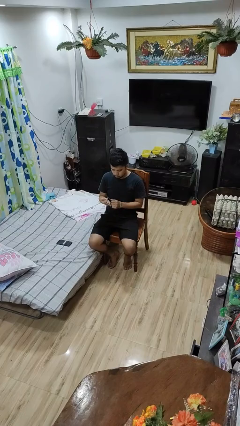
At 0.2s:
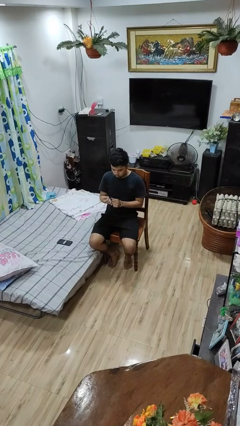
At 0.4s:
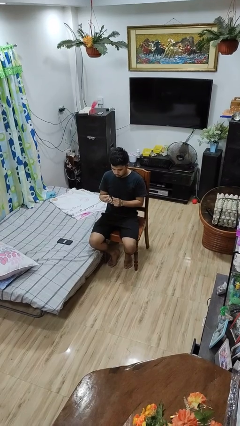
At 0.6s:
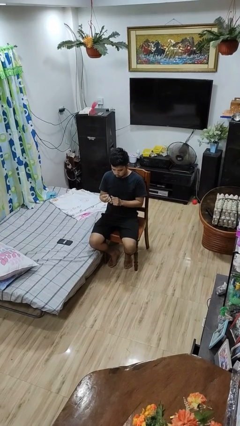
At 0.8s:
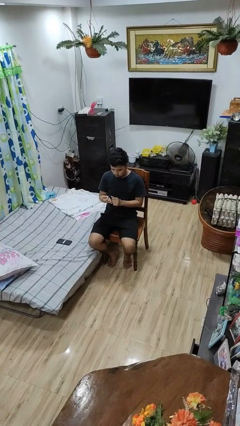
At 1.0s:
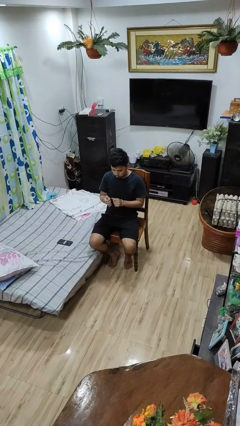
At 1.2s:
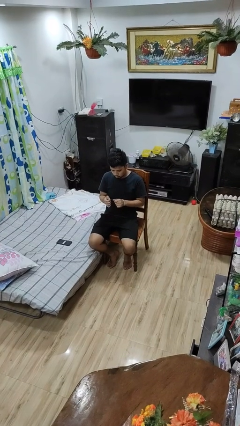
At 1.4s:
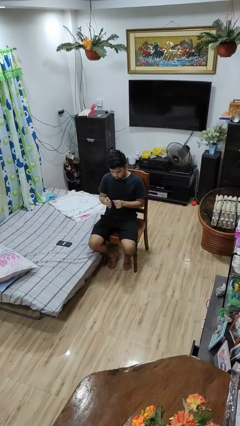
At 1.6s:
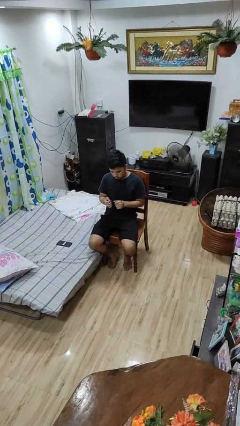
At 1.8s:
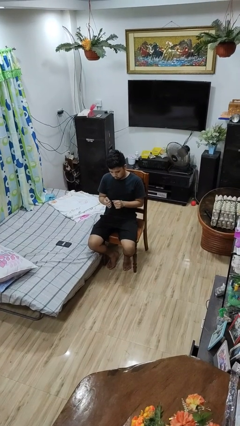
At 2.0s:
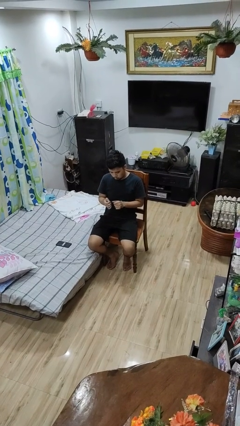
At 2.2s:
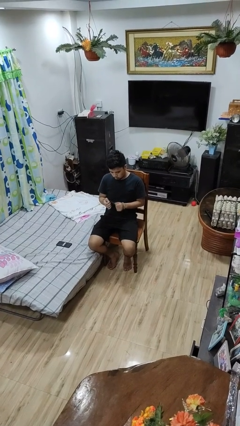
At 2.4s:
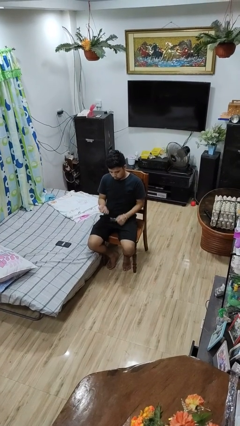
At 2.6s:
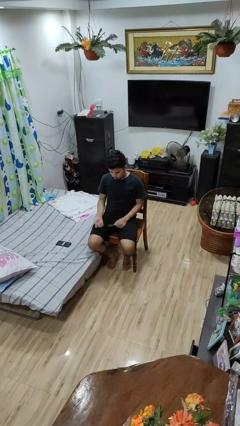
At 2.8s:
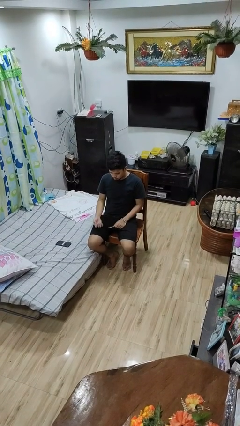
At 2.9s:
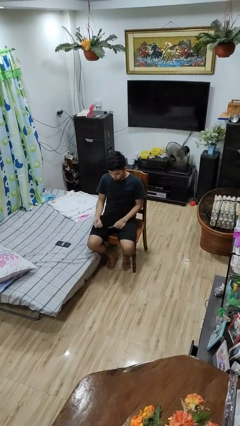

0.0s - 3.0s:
person files fingernails

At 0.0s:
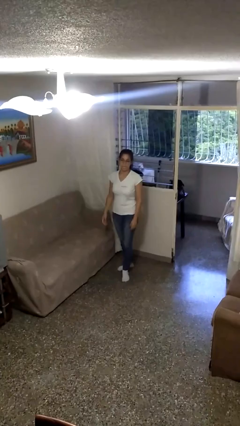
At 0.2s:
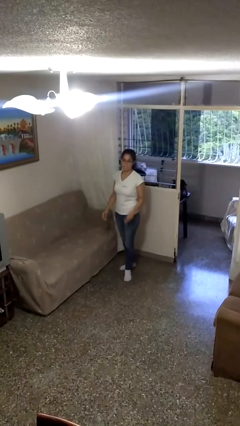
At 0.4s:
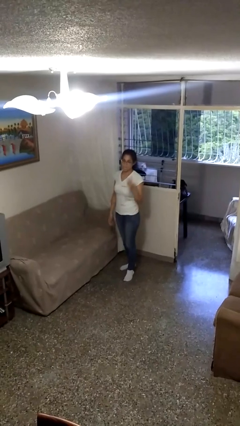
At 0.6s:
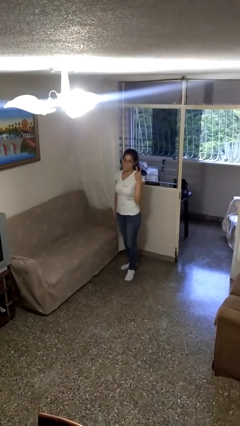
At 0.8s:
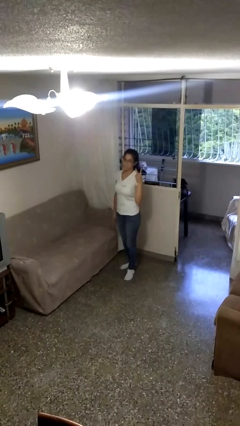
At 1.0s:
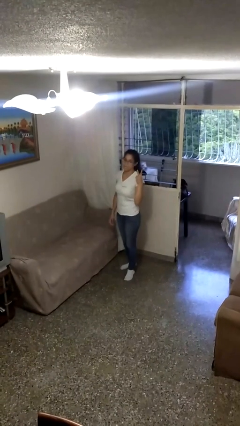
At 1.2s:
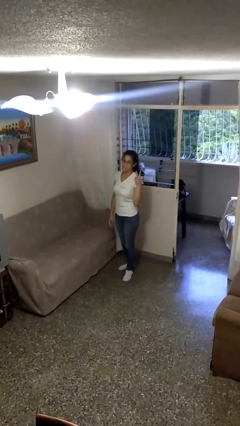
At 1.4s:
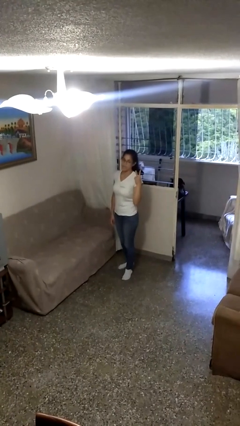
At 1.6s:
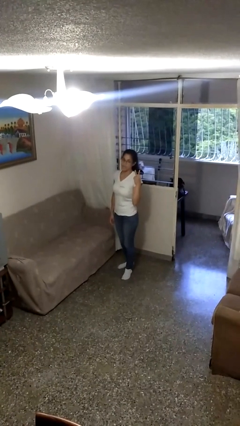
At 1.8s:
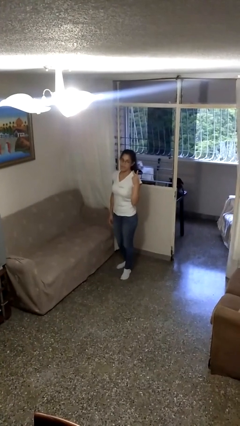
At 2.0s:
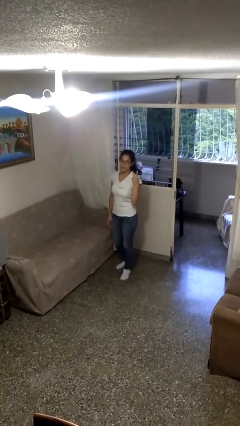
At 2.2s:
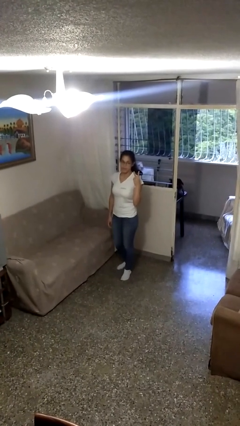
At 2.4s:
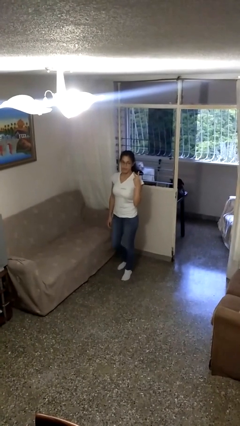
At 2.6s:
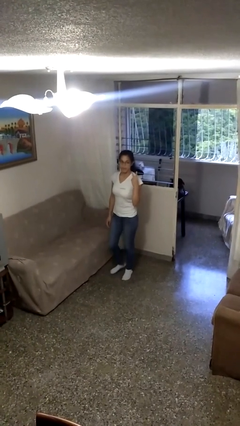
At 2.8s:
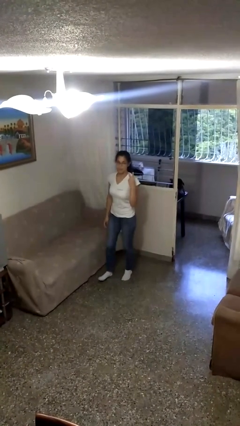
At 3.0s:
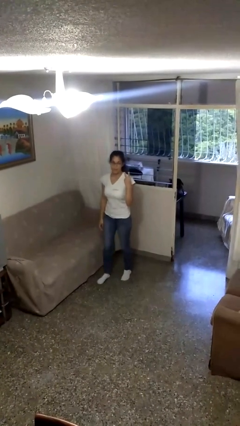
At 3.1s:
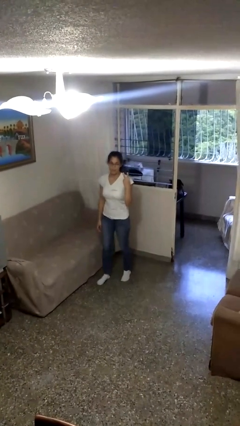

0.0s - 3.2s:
person gestures peace

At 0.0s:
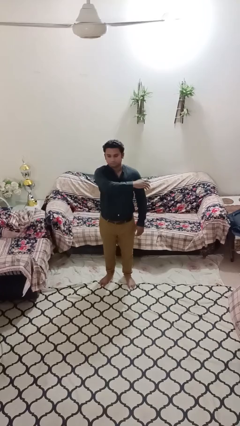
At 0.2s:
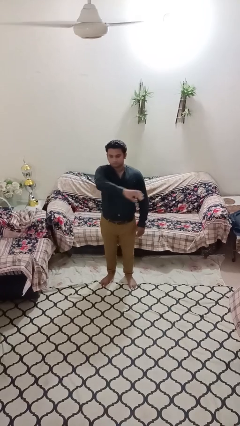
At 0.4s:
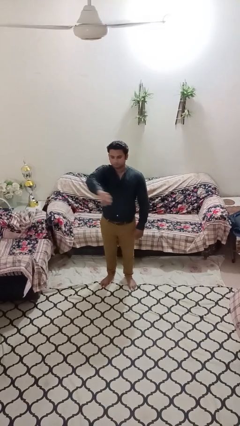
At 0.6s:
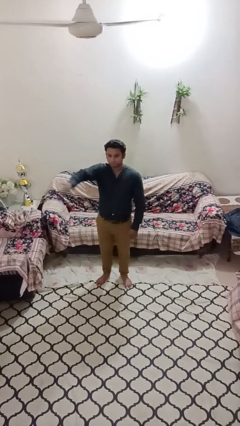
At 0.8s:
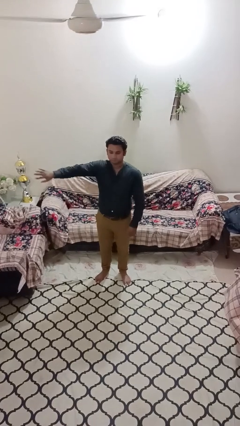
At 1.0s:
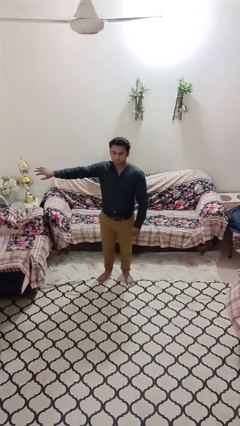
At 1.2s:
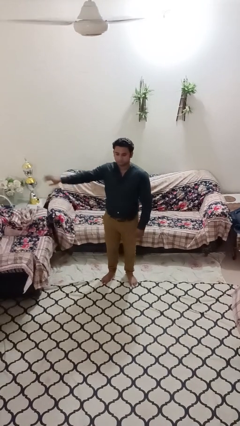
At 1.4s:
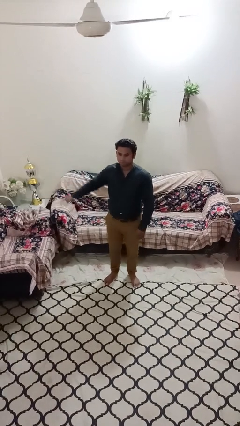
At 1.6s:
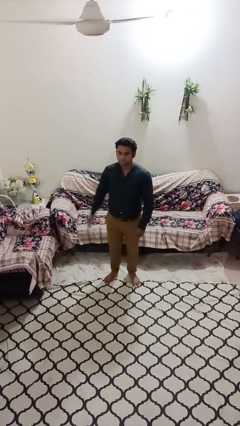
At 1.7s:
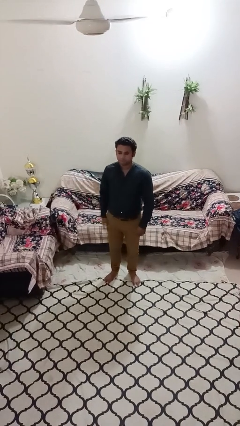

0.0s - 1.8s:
person gestures swipe right

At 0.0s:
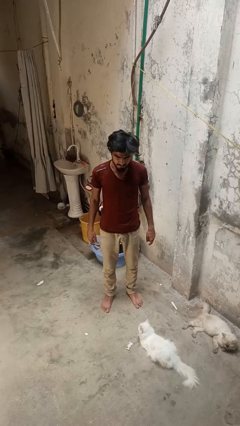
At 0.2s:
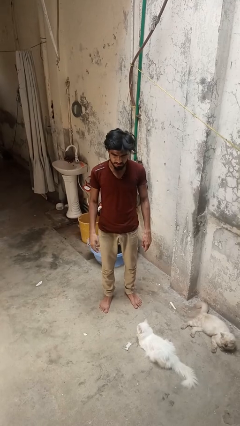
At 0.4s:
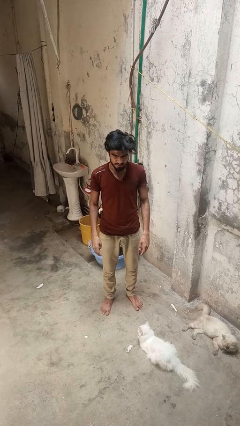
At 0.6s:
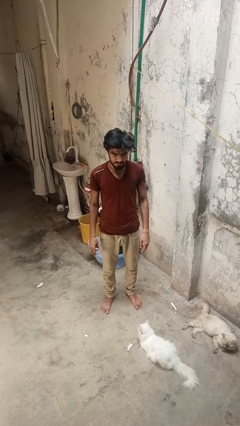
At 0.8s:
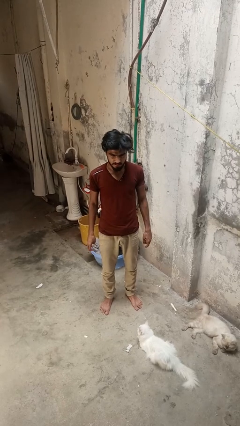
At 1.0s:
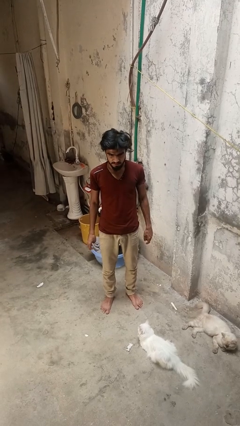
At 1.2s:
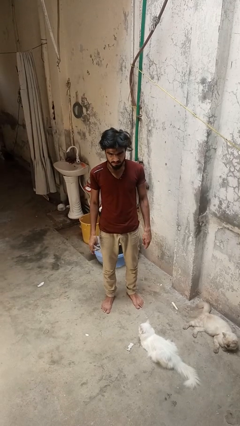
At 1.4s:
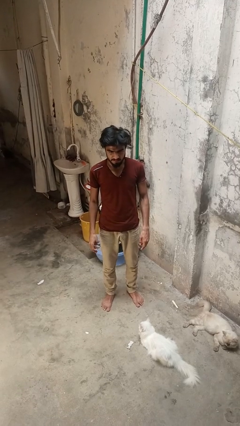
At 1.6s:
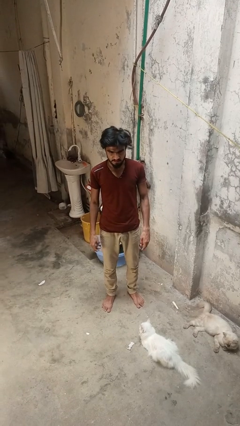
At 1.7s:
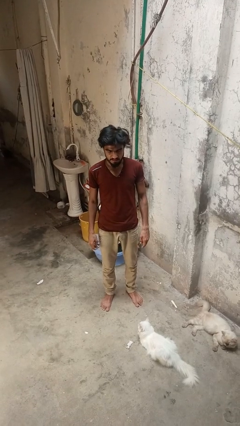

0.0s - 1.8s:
person gestures lower hand

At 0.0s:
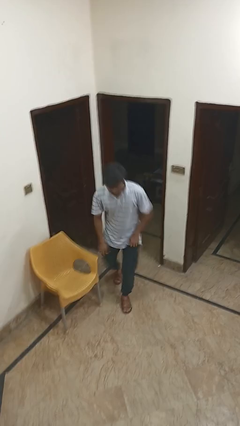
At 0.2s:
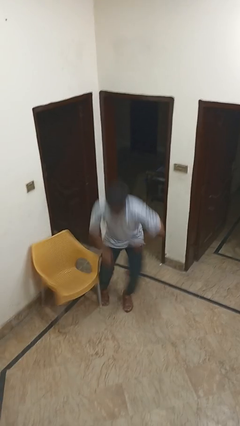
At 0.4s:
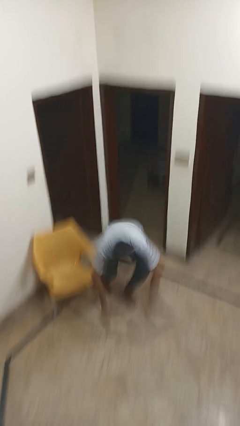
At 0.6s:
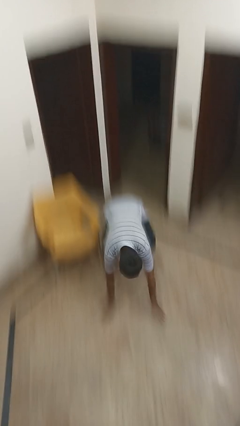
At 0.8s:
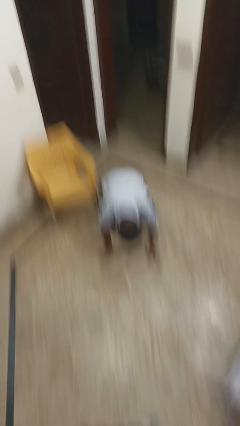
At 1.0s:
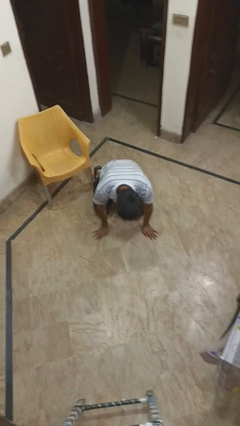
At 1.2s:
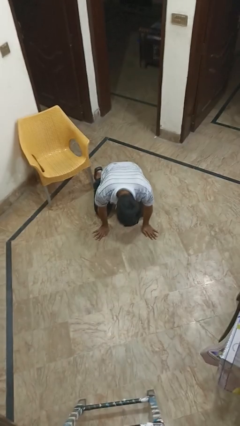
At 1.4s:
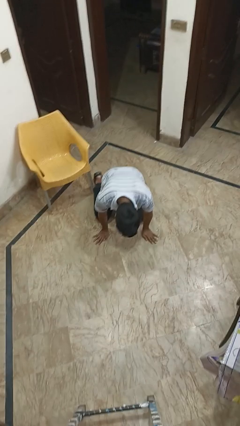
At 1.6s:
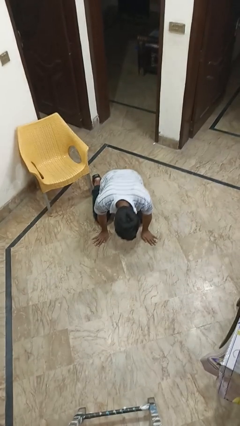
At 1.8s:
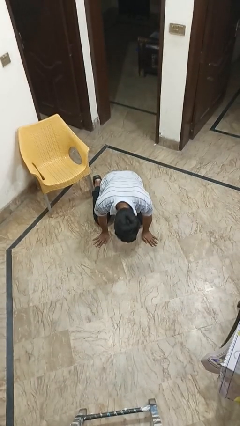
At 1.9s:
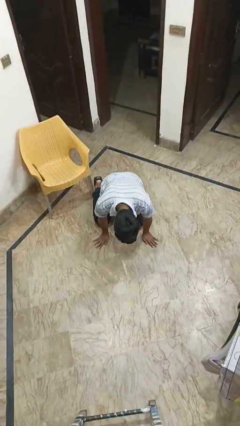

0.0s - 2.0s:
person trips on object on floor

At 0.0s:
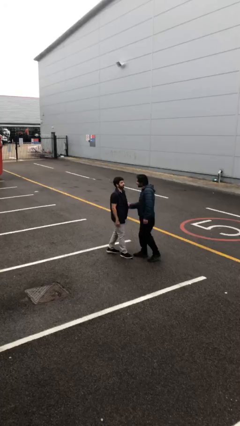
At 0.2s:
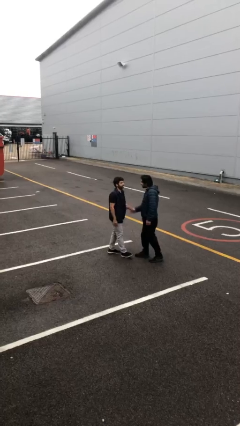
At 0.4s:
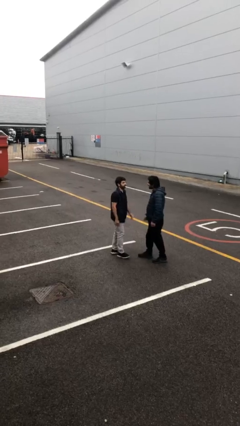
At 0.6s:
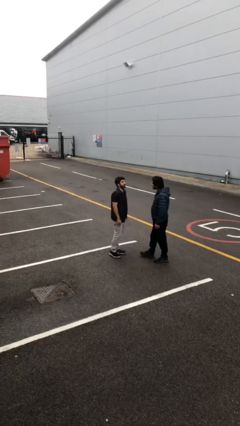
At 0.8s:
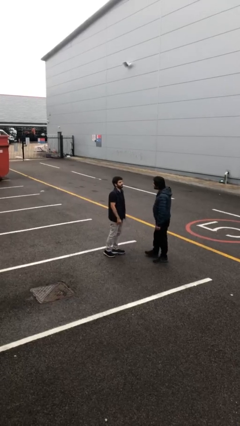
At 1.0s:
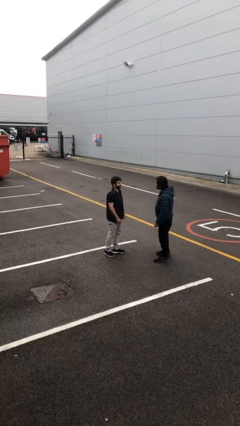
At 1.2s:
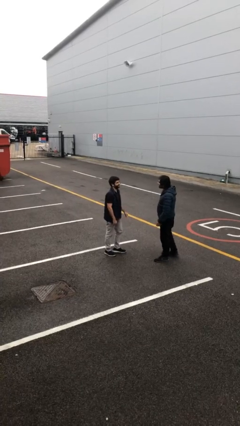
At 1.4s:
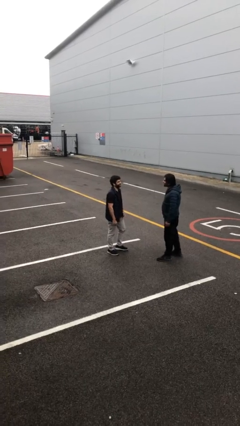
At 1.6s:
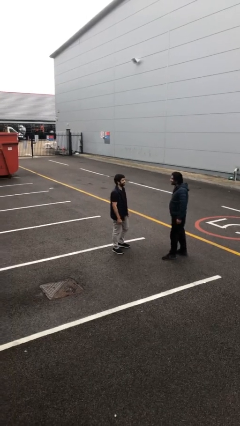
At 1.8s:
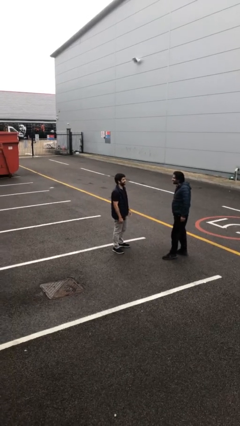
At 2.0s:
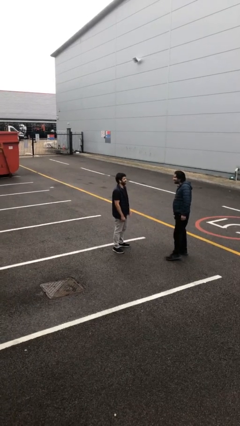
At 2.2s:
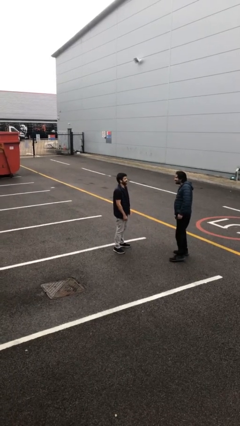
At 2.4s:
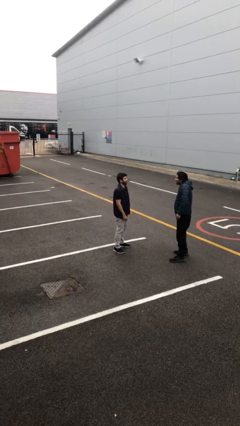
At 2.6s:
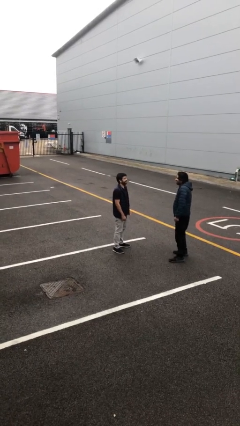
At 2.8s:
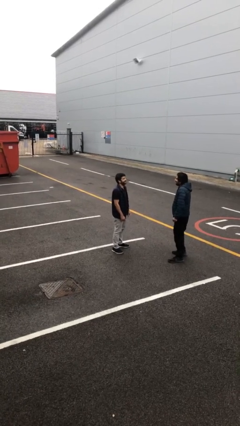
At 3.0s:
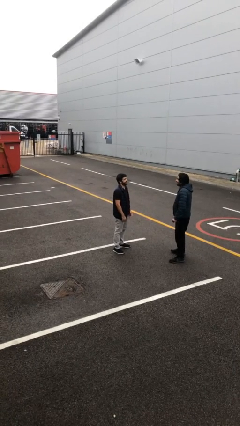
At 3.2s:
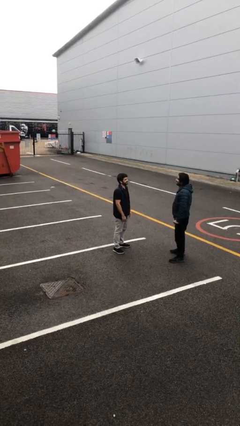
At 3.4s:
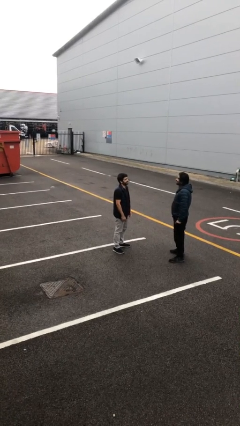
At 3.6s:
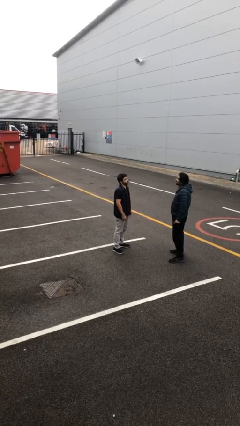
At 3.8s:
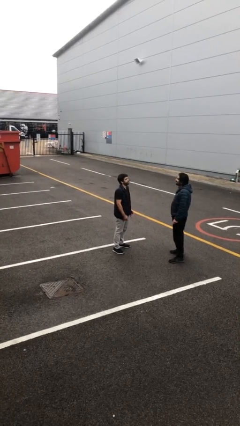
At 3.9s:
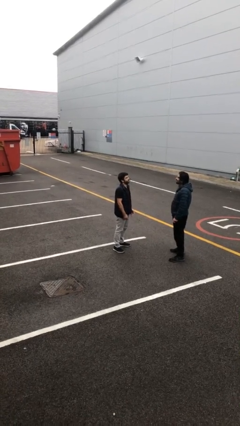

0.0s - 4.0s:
person talks to person

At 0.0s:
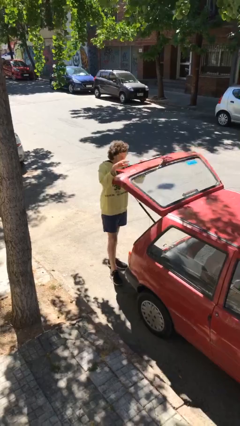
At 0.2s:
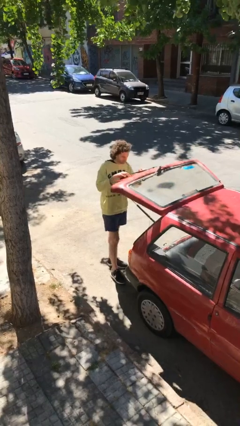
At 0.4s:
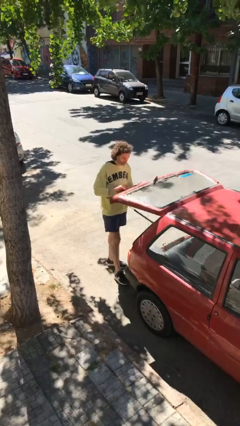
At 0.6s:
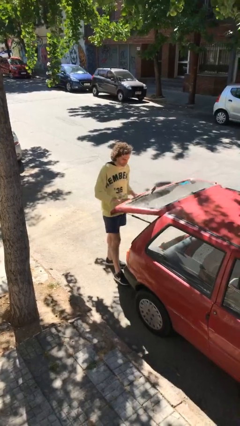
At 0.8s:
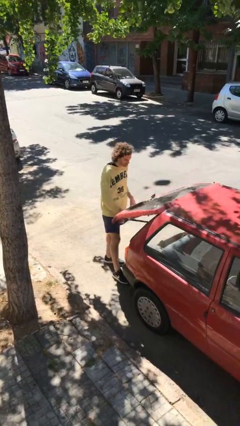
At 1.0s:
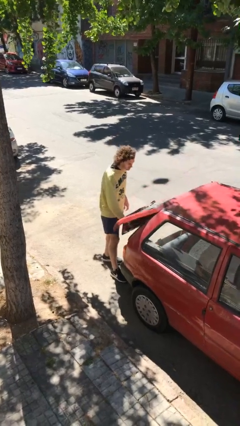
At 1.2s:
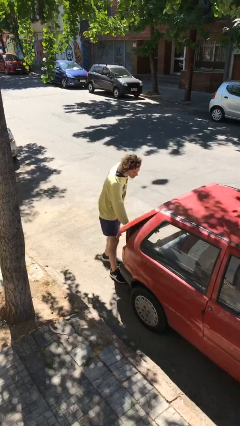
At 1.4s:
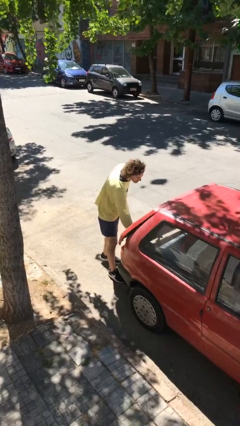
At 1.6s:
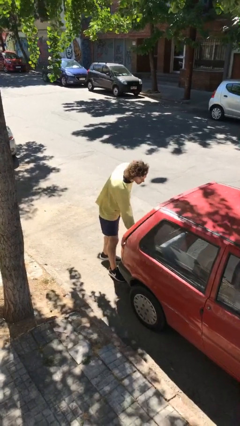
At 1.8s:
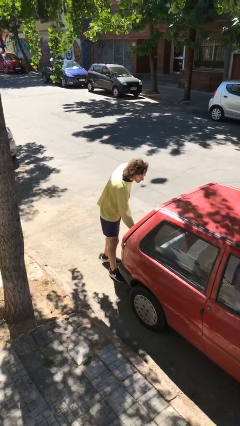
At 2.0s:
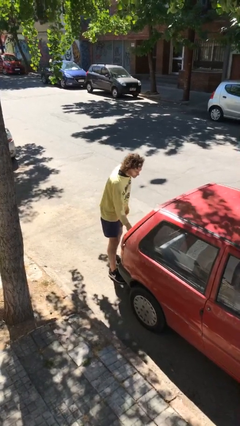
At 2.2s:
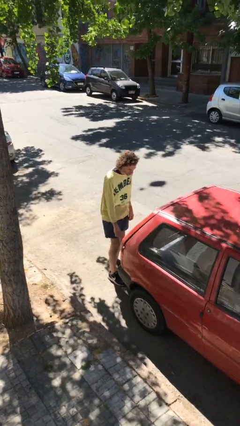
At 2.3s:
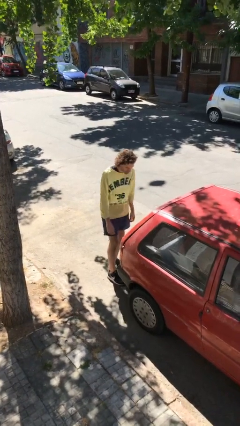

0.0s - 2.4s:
person closes car trunk
